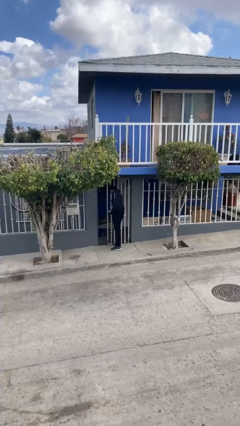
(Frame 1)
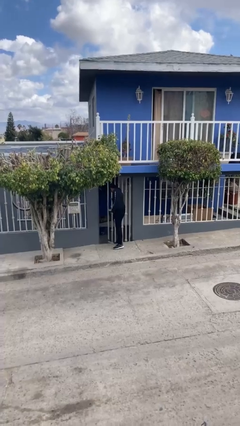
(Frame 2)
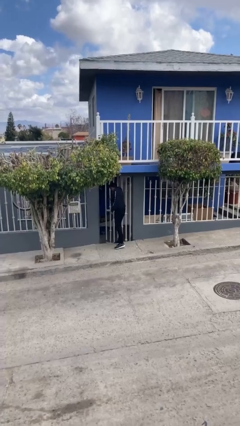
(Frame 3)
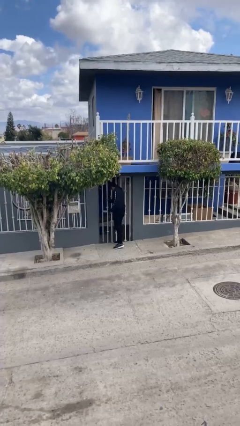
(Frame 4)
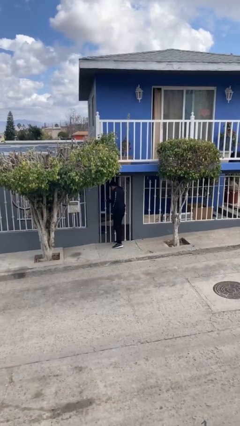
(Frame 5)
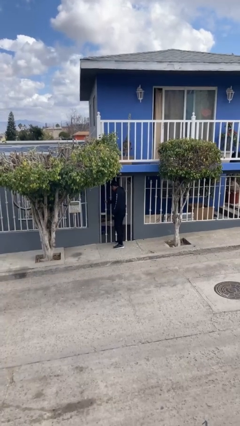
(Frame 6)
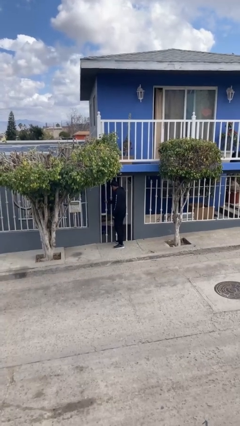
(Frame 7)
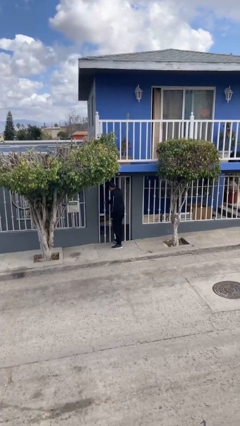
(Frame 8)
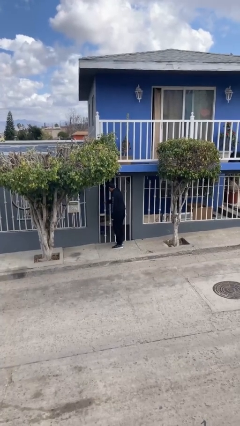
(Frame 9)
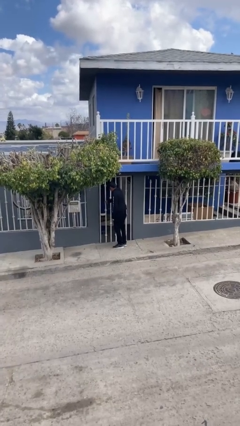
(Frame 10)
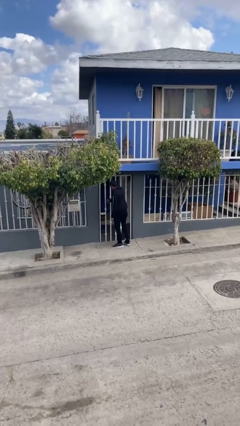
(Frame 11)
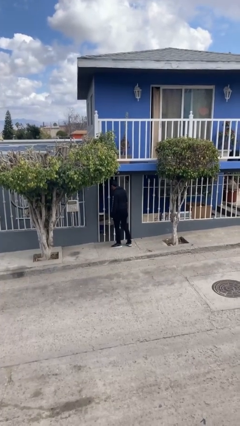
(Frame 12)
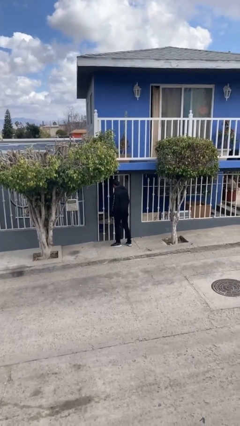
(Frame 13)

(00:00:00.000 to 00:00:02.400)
person closes facility door

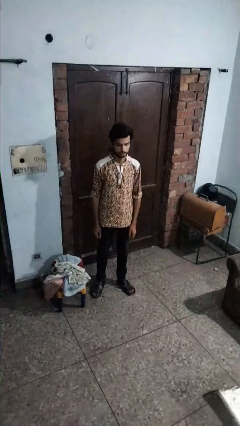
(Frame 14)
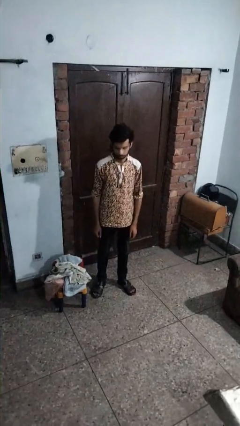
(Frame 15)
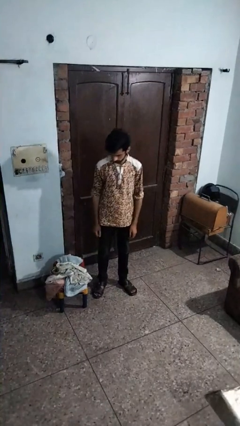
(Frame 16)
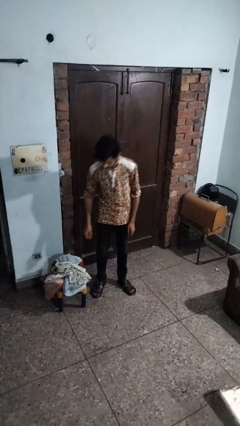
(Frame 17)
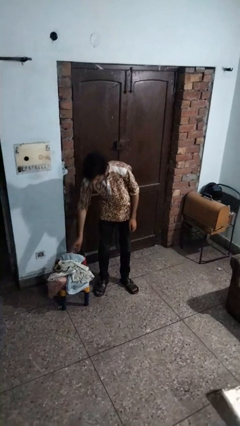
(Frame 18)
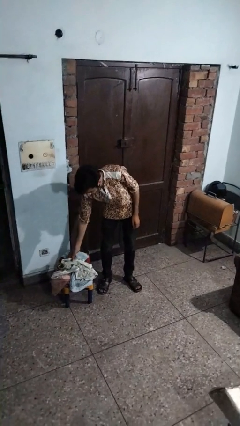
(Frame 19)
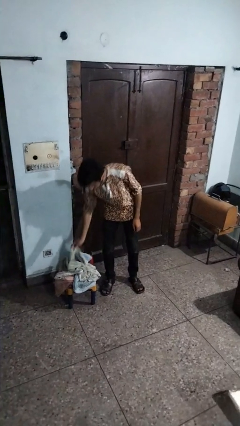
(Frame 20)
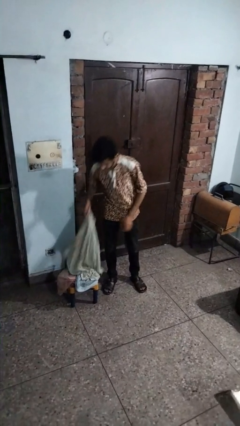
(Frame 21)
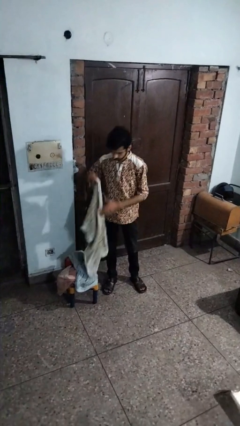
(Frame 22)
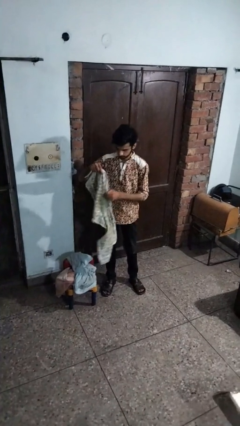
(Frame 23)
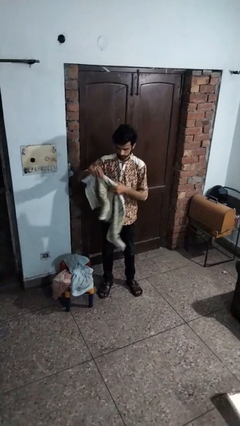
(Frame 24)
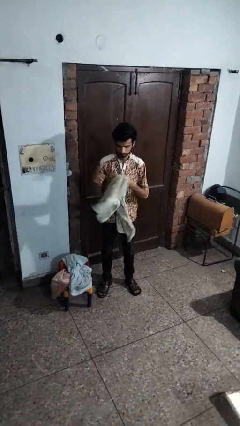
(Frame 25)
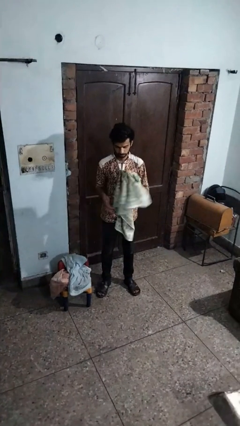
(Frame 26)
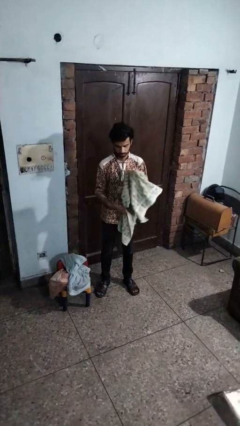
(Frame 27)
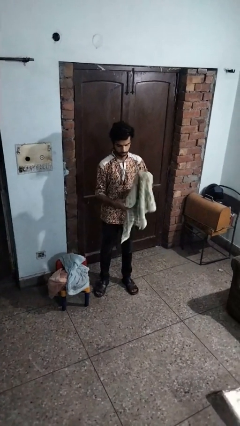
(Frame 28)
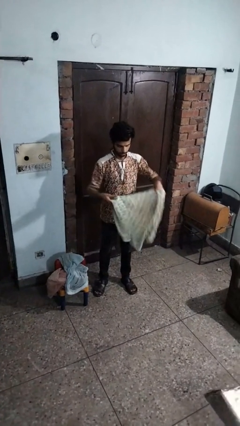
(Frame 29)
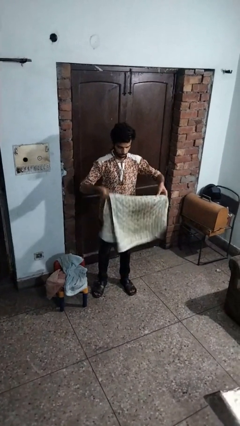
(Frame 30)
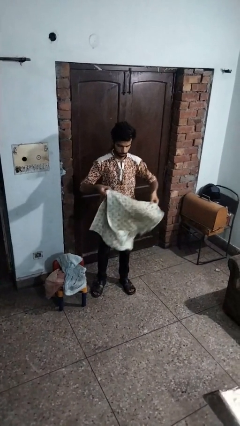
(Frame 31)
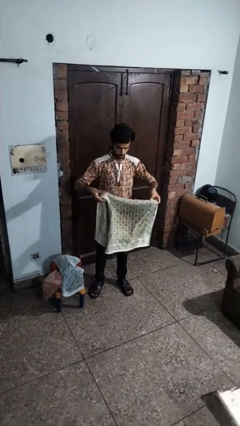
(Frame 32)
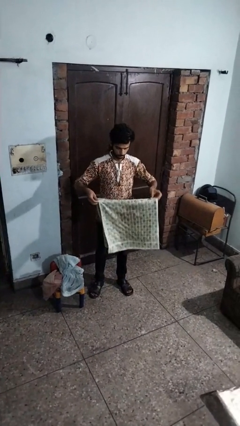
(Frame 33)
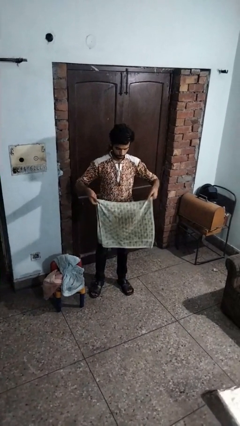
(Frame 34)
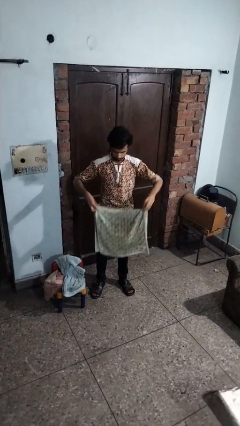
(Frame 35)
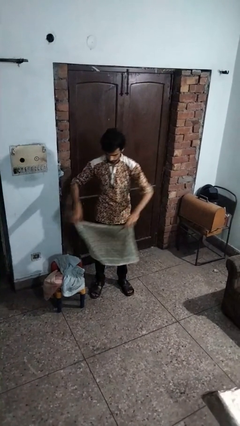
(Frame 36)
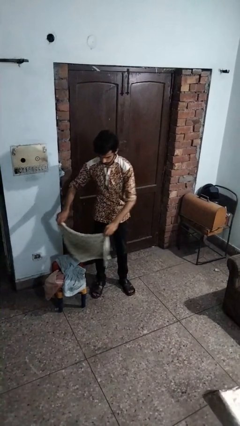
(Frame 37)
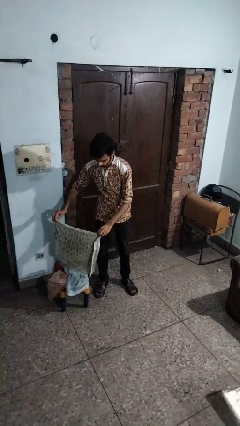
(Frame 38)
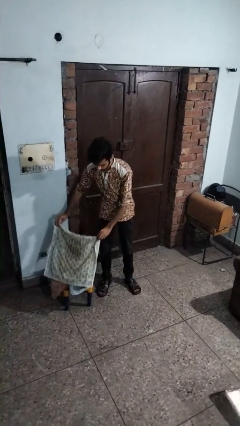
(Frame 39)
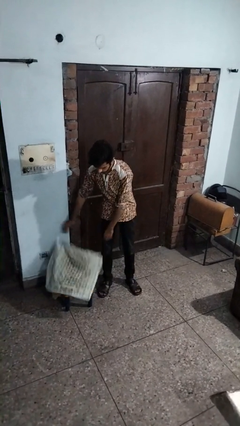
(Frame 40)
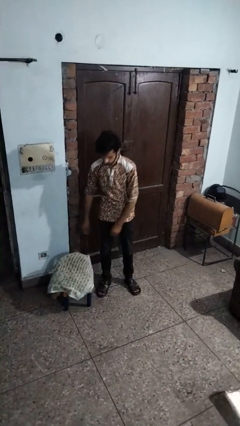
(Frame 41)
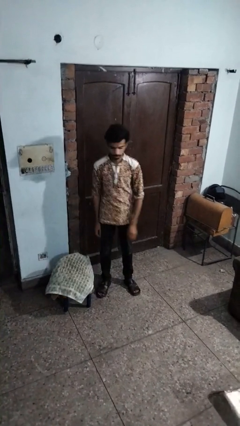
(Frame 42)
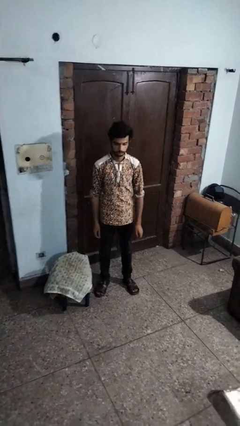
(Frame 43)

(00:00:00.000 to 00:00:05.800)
person folds towel

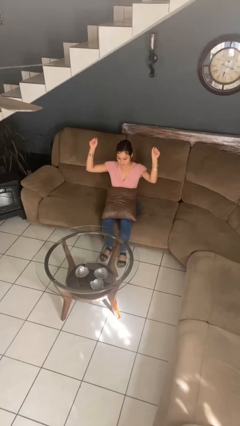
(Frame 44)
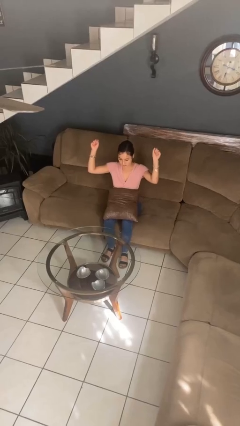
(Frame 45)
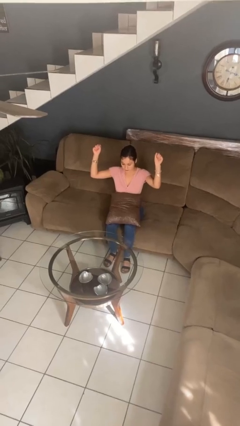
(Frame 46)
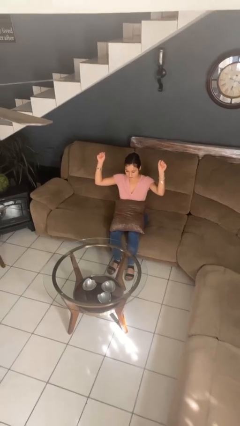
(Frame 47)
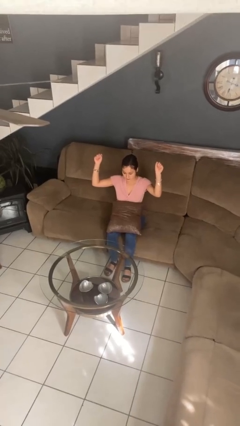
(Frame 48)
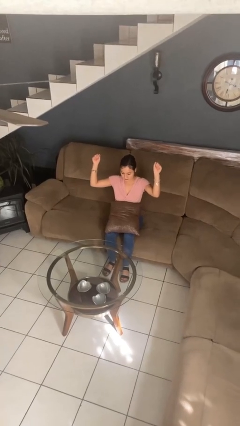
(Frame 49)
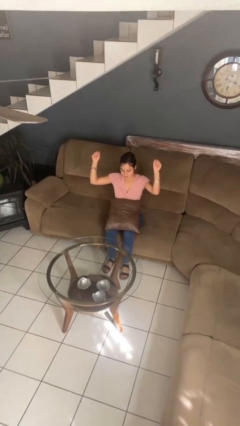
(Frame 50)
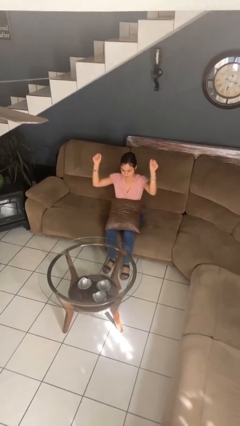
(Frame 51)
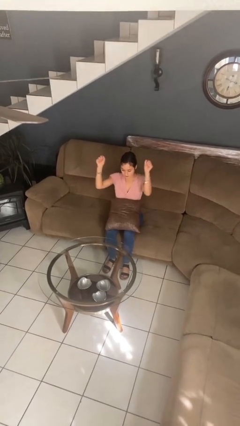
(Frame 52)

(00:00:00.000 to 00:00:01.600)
person gestures zoom in

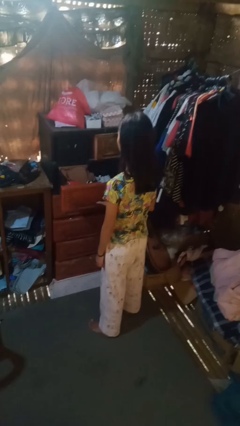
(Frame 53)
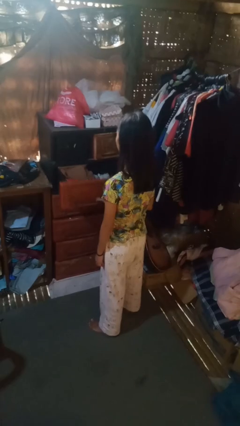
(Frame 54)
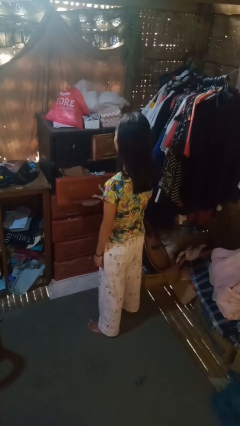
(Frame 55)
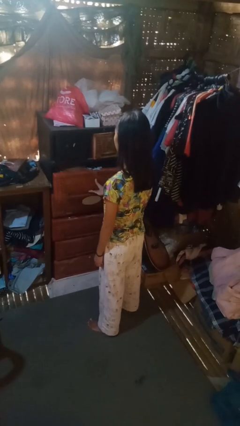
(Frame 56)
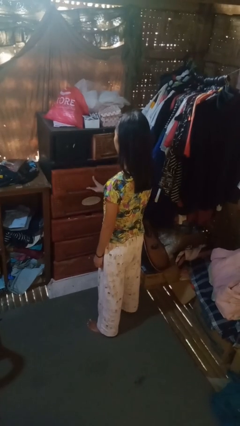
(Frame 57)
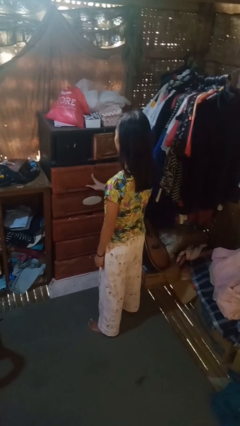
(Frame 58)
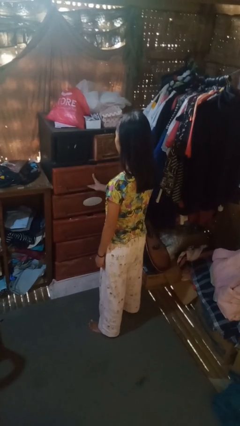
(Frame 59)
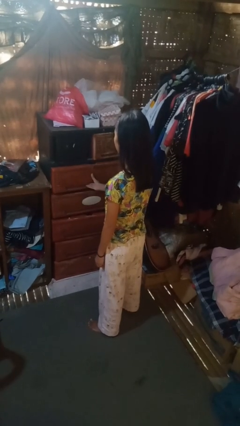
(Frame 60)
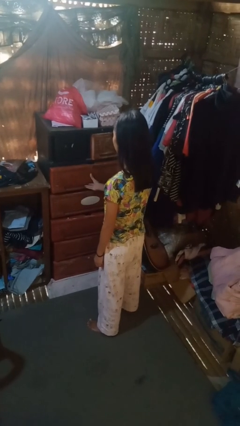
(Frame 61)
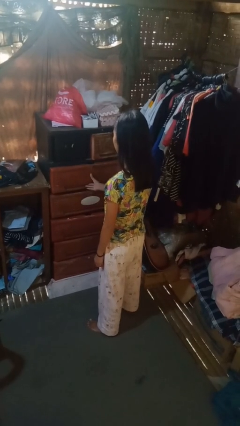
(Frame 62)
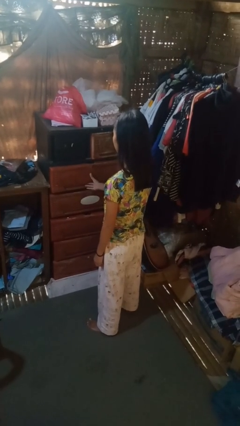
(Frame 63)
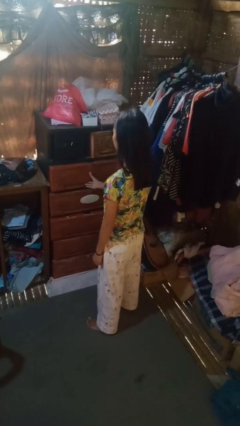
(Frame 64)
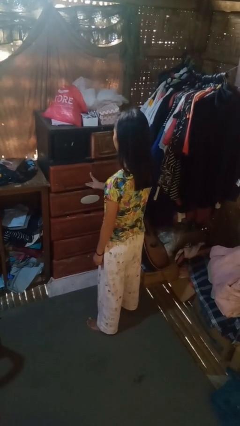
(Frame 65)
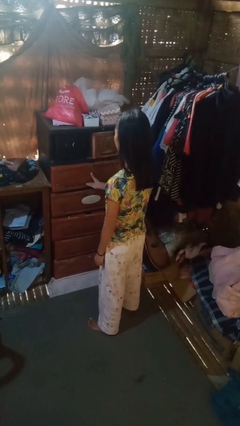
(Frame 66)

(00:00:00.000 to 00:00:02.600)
person closes dresser drawer

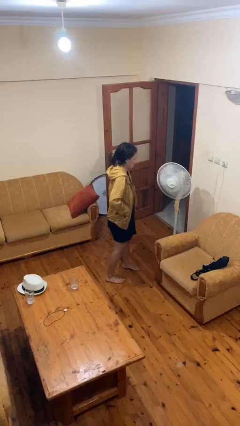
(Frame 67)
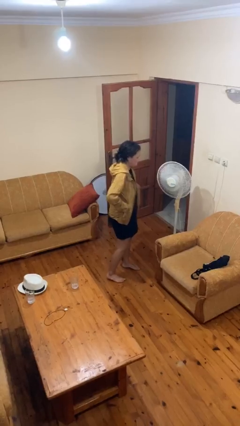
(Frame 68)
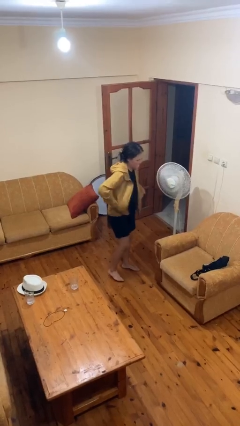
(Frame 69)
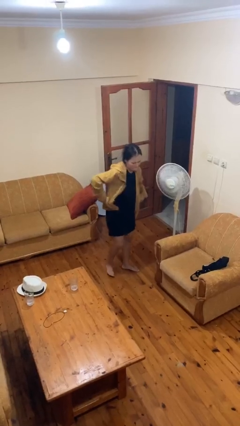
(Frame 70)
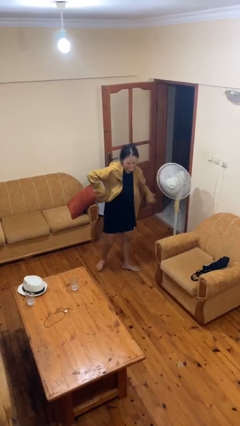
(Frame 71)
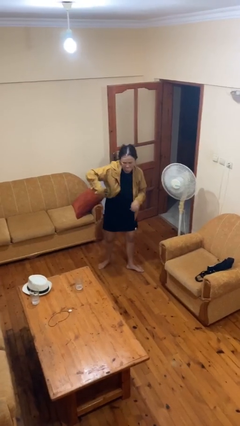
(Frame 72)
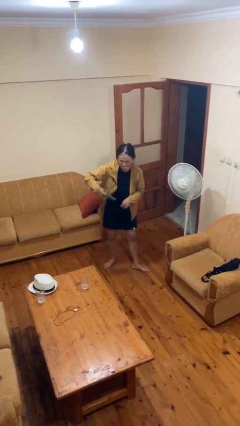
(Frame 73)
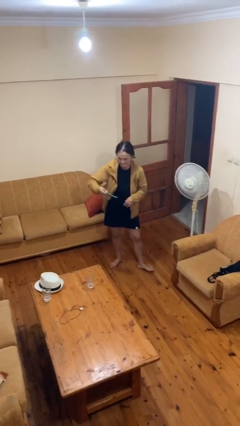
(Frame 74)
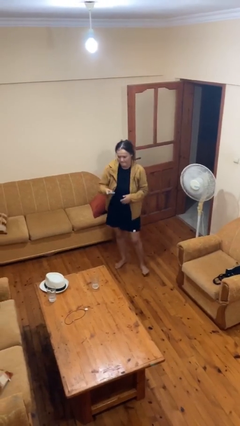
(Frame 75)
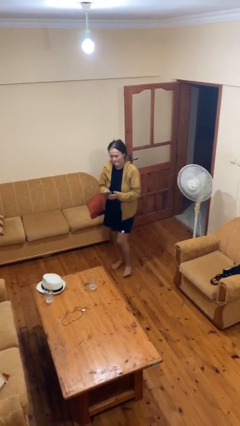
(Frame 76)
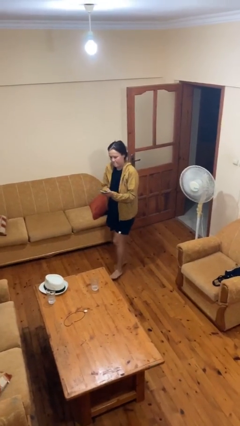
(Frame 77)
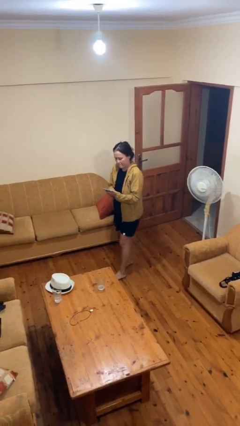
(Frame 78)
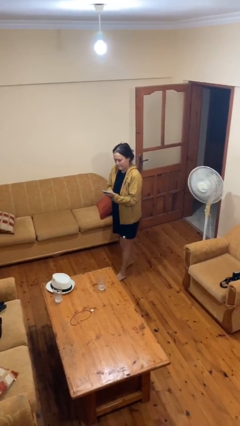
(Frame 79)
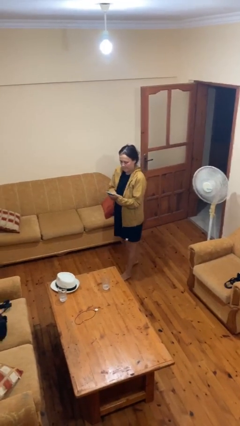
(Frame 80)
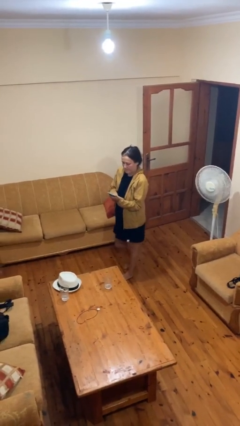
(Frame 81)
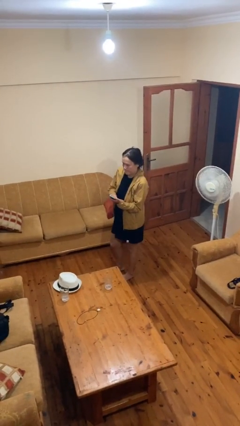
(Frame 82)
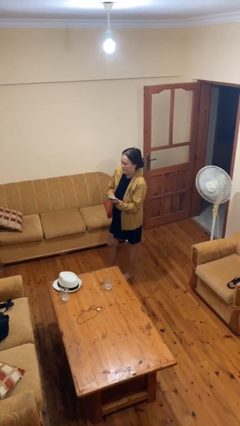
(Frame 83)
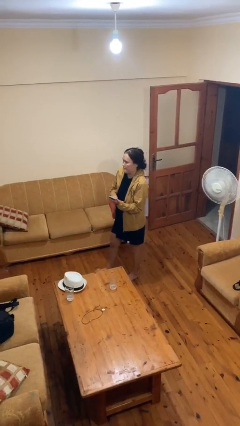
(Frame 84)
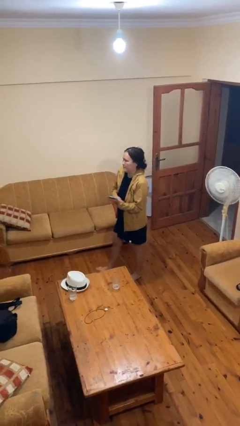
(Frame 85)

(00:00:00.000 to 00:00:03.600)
person takes phone from pocket

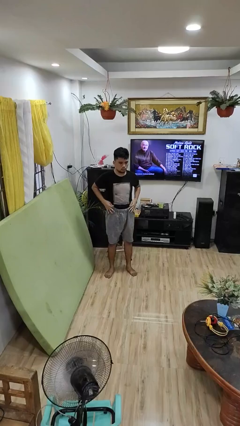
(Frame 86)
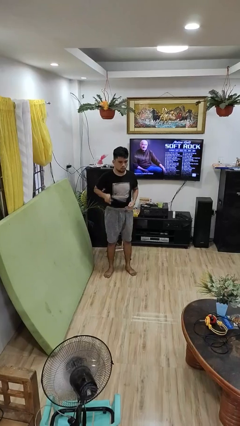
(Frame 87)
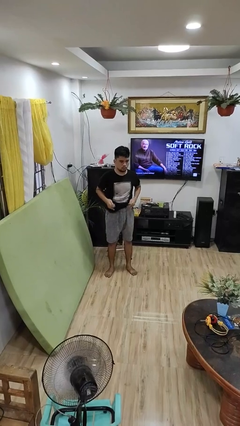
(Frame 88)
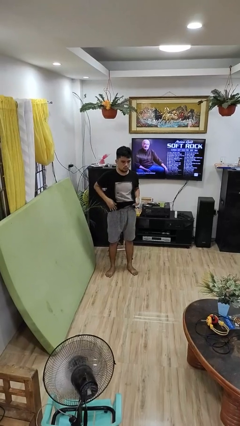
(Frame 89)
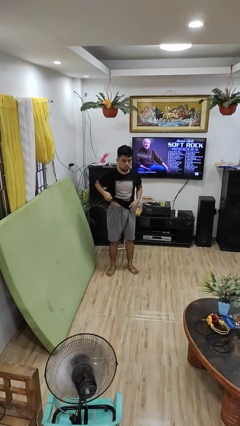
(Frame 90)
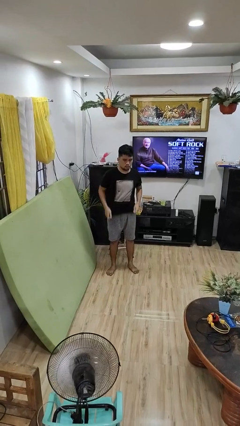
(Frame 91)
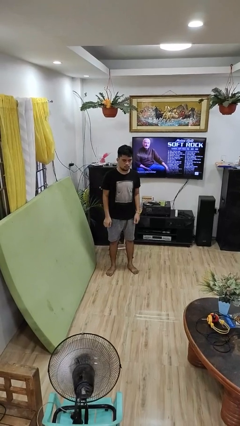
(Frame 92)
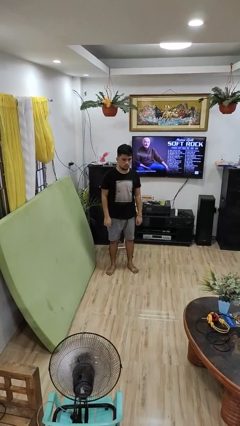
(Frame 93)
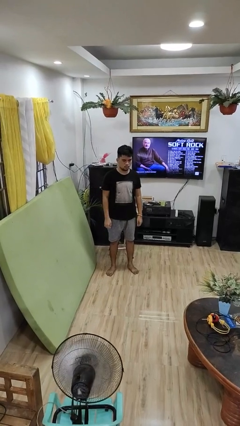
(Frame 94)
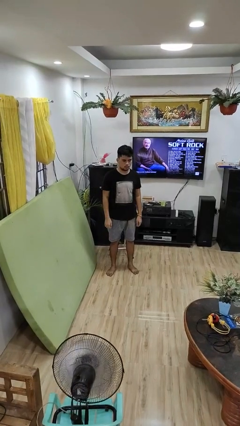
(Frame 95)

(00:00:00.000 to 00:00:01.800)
person untucks shirt
